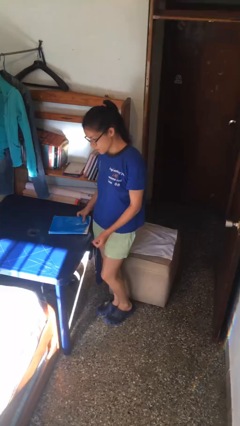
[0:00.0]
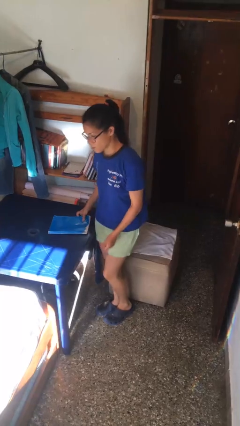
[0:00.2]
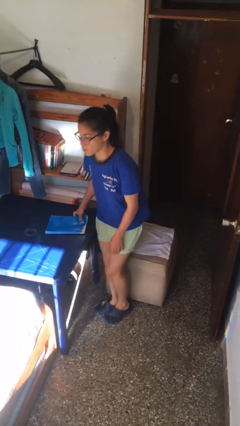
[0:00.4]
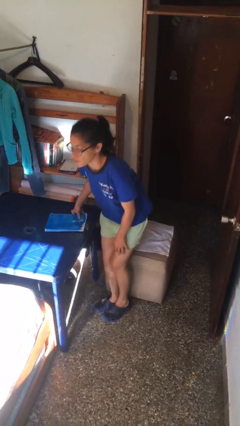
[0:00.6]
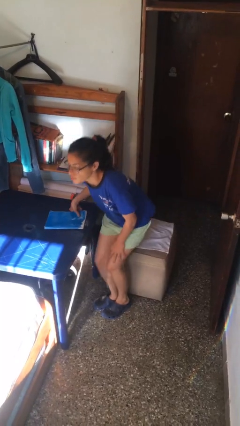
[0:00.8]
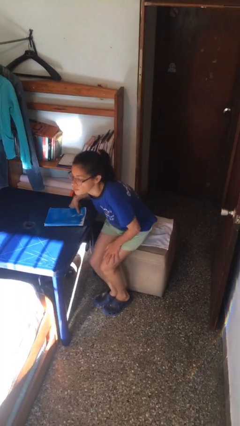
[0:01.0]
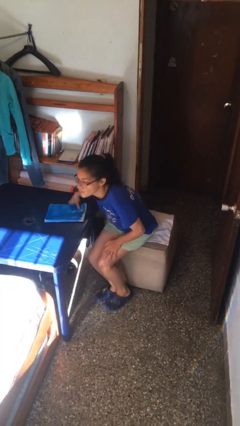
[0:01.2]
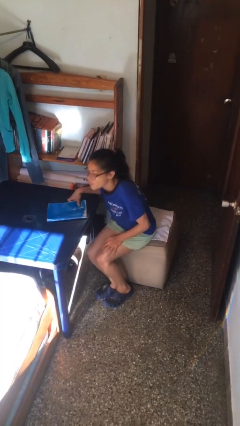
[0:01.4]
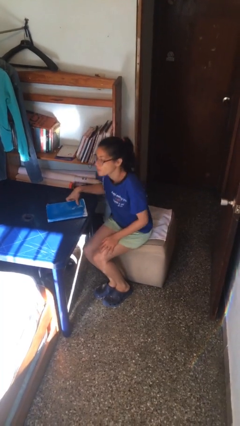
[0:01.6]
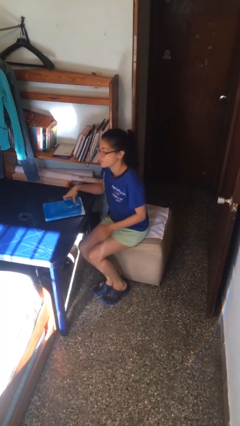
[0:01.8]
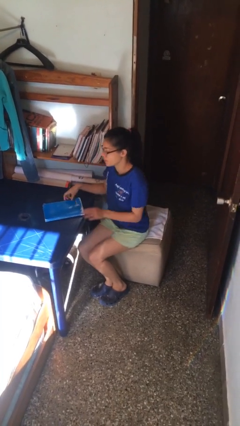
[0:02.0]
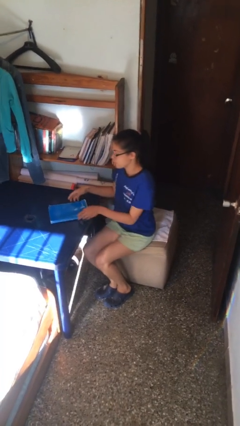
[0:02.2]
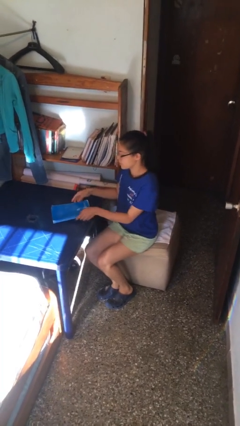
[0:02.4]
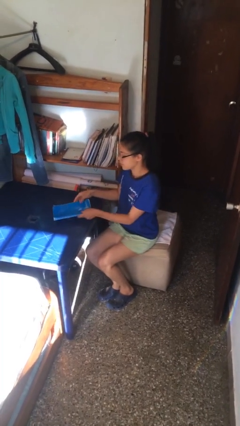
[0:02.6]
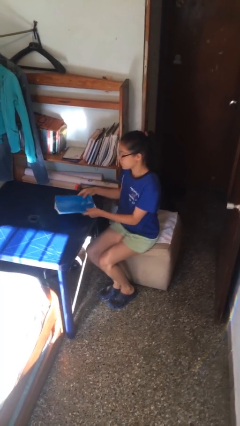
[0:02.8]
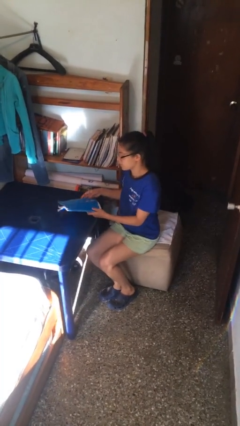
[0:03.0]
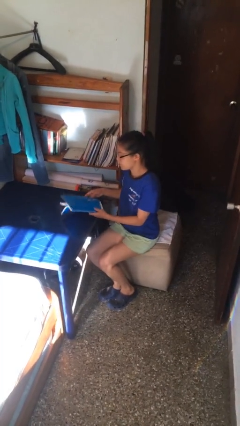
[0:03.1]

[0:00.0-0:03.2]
person sits down

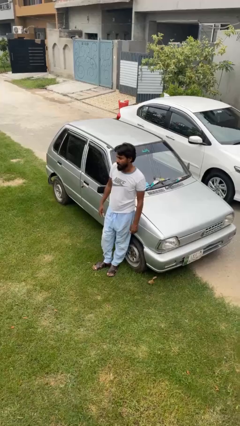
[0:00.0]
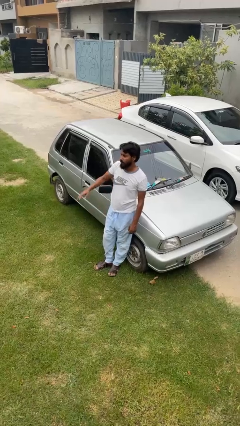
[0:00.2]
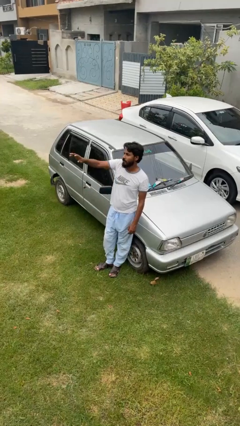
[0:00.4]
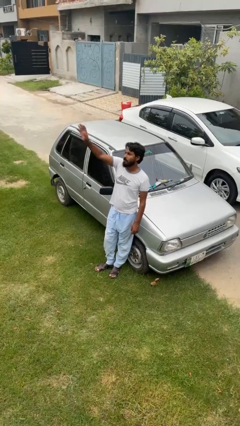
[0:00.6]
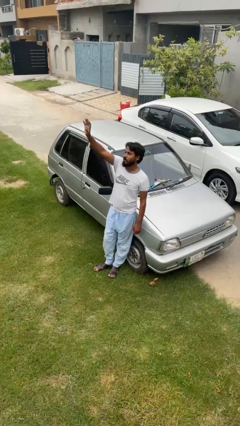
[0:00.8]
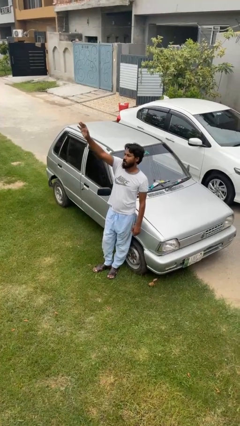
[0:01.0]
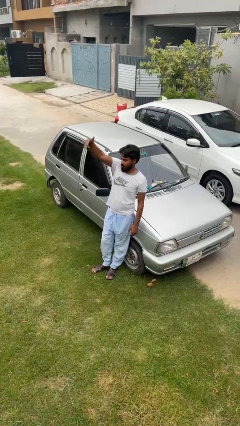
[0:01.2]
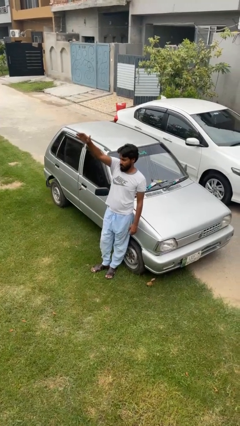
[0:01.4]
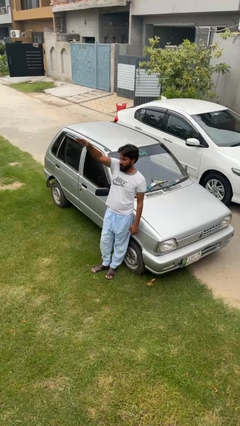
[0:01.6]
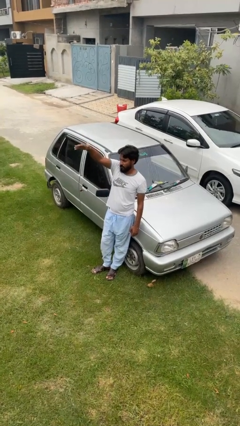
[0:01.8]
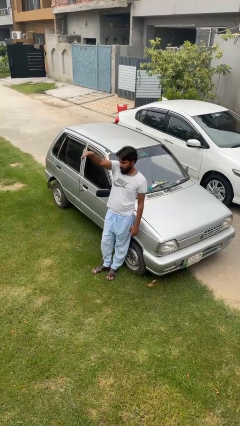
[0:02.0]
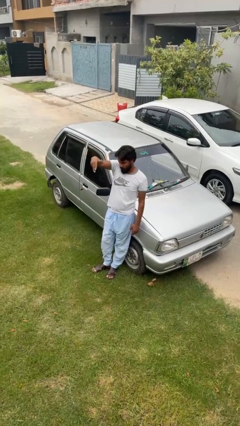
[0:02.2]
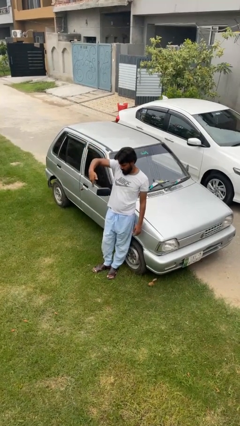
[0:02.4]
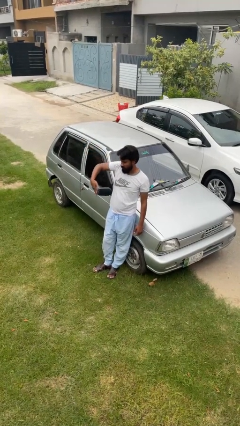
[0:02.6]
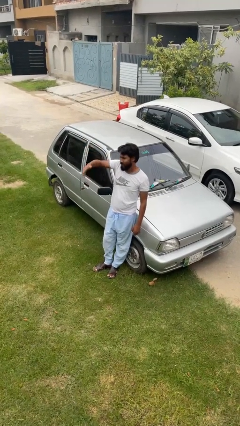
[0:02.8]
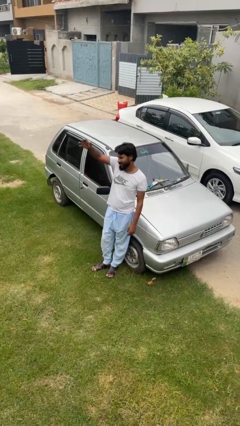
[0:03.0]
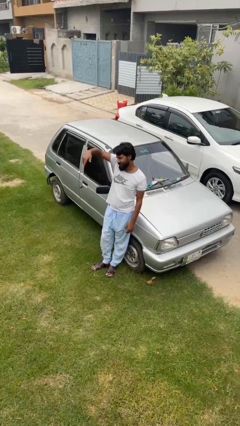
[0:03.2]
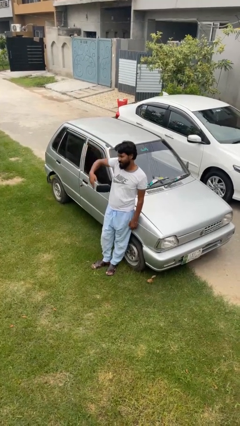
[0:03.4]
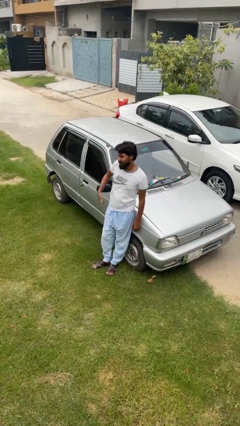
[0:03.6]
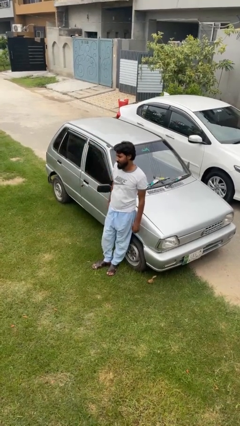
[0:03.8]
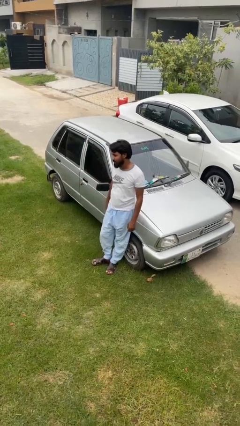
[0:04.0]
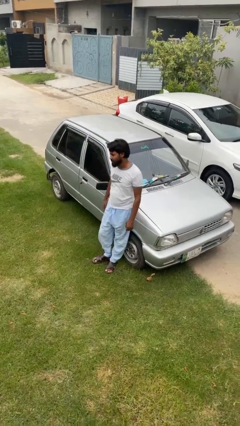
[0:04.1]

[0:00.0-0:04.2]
person gestures come here

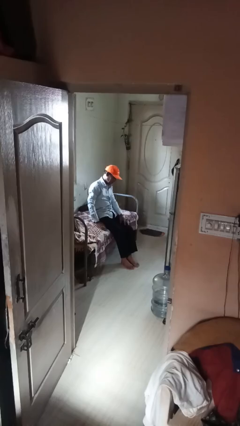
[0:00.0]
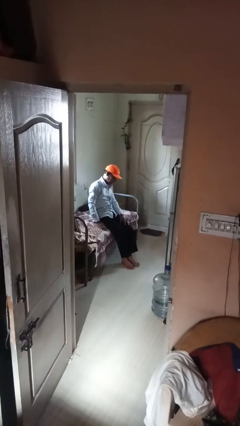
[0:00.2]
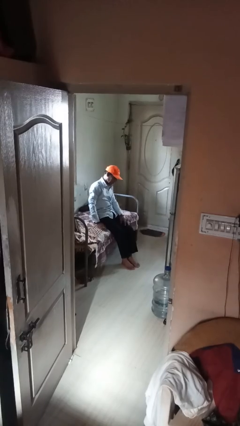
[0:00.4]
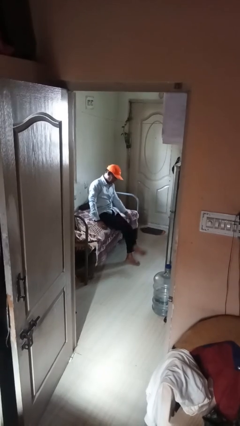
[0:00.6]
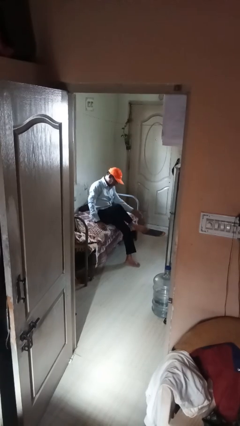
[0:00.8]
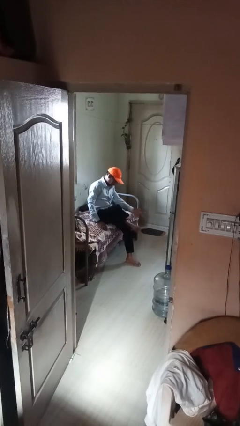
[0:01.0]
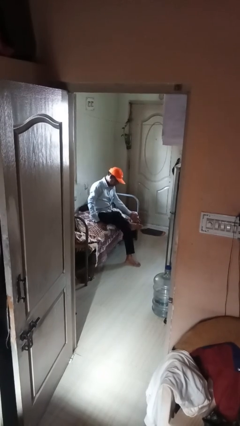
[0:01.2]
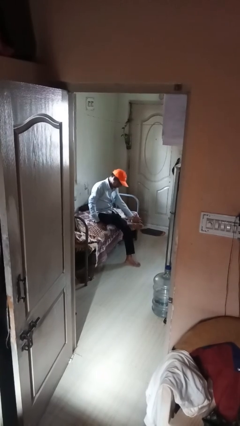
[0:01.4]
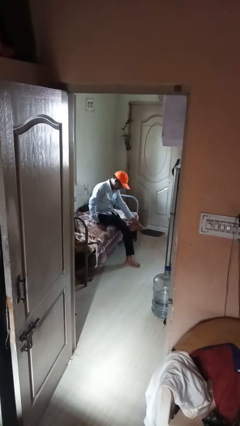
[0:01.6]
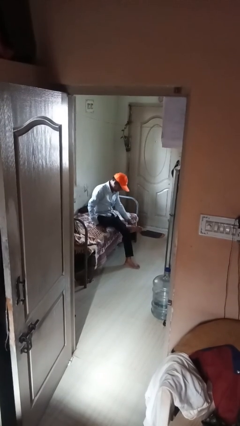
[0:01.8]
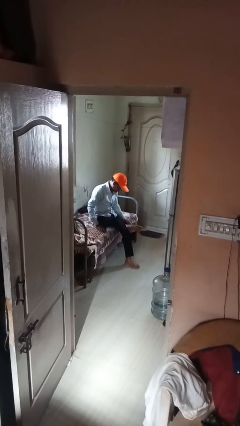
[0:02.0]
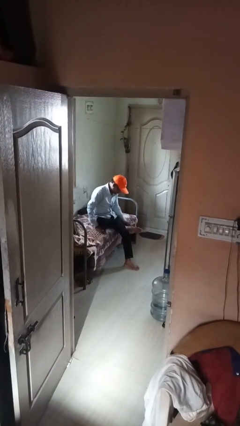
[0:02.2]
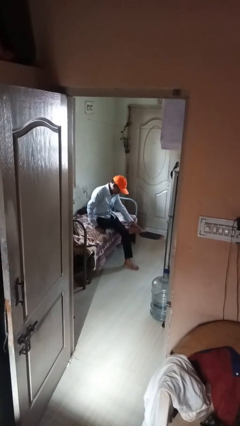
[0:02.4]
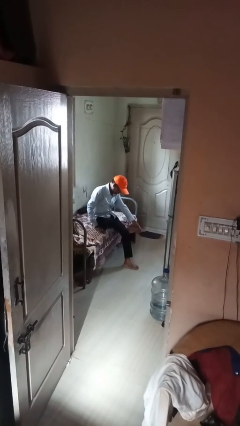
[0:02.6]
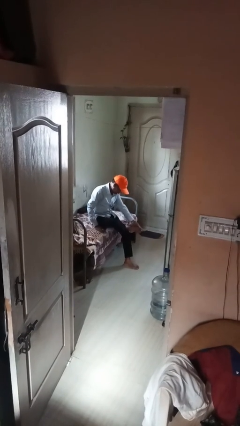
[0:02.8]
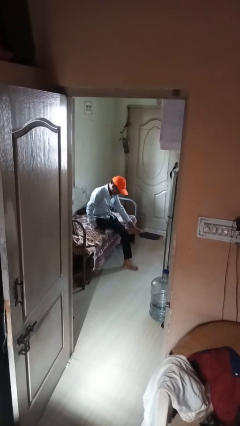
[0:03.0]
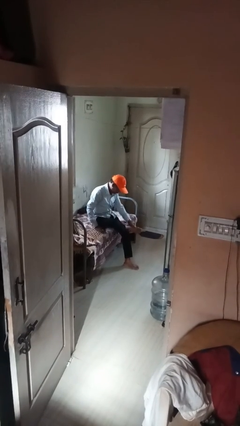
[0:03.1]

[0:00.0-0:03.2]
person rubs foot

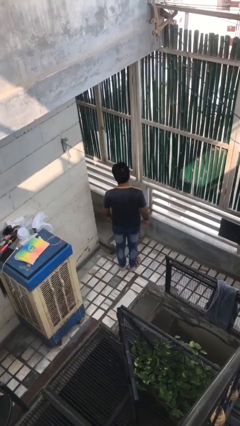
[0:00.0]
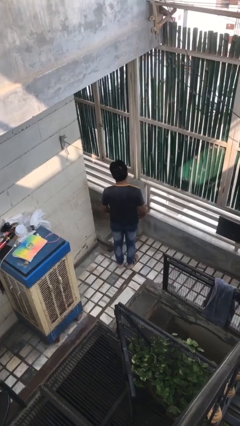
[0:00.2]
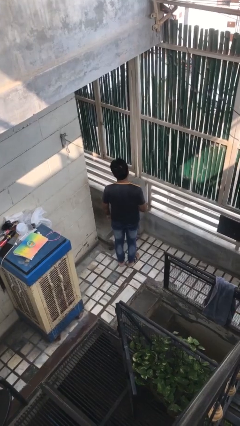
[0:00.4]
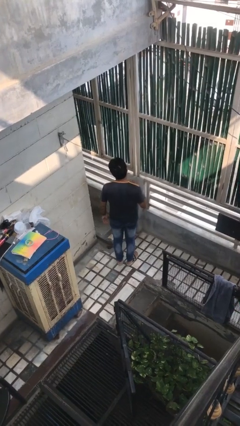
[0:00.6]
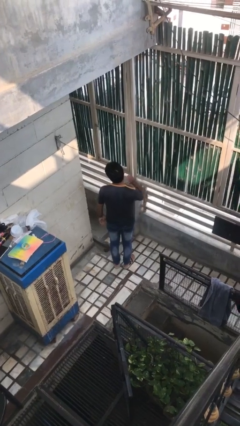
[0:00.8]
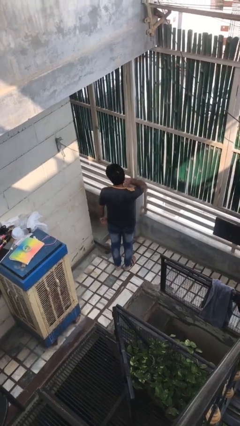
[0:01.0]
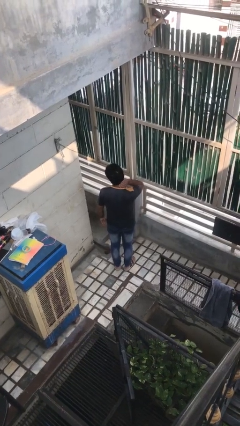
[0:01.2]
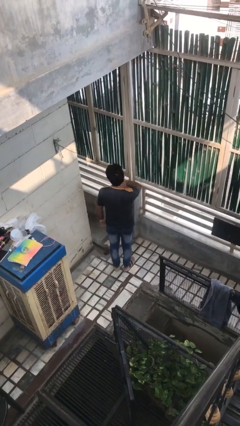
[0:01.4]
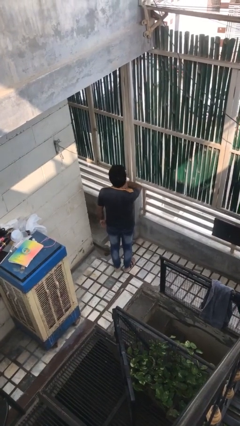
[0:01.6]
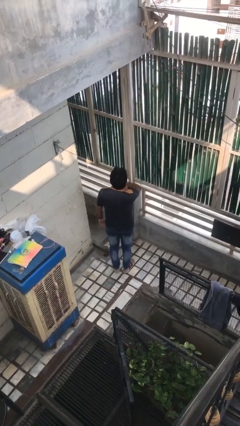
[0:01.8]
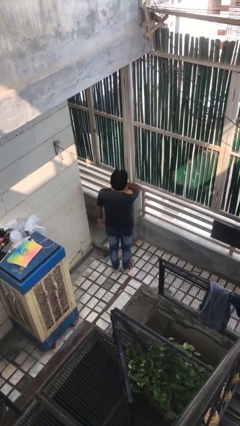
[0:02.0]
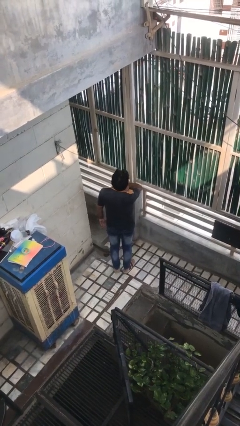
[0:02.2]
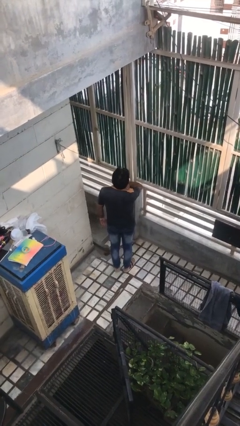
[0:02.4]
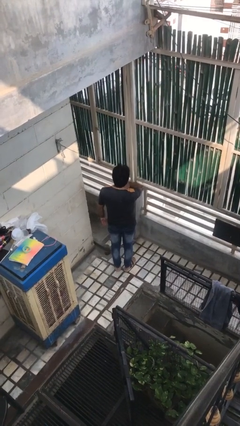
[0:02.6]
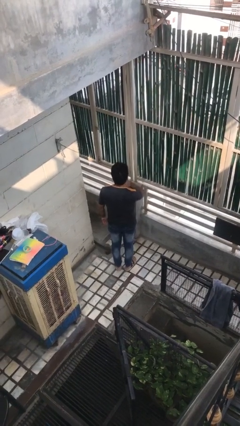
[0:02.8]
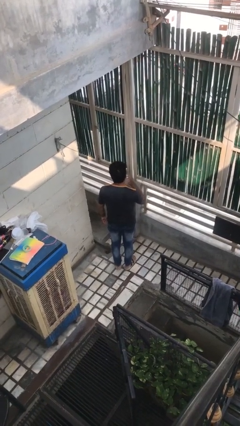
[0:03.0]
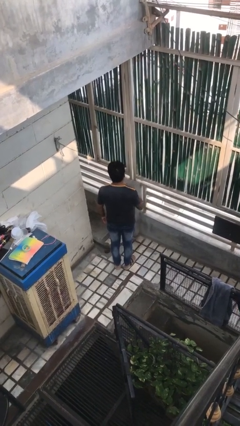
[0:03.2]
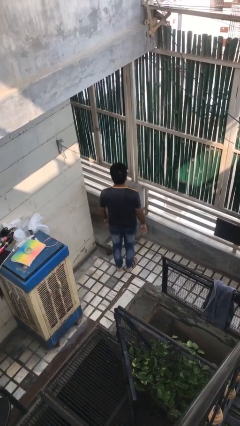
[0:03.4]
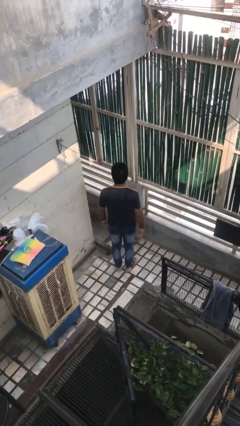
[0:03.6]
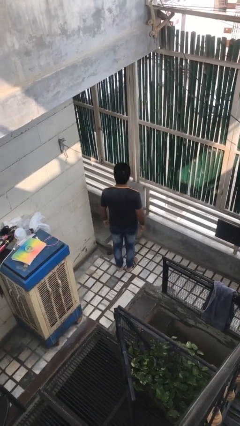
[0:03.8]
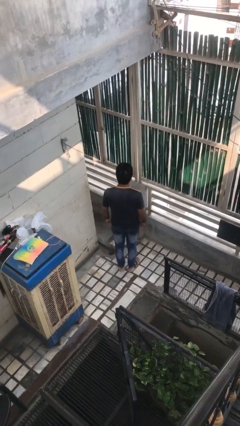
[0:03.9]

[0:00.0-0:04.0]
person rubs neck

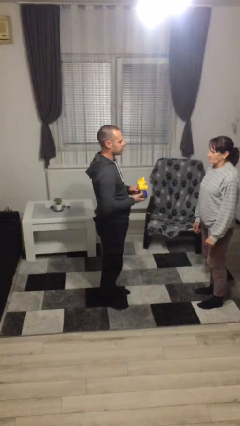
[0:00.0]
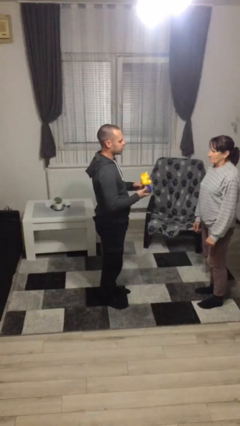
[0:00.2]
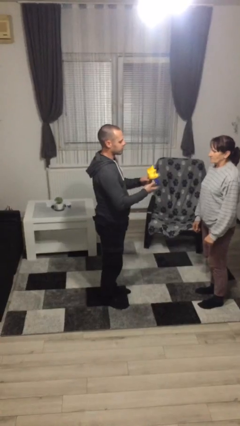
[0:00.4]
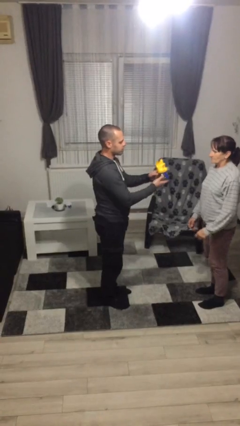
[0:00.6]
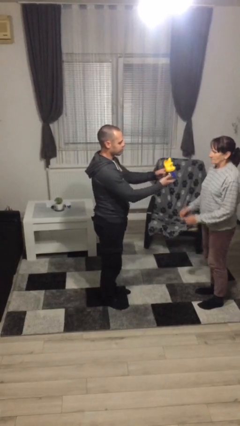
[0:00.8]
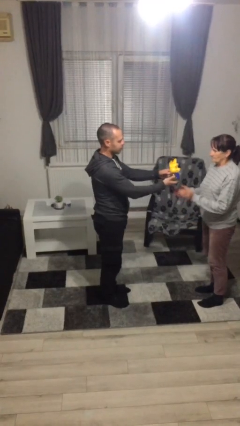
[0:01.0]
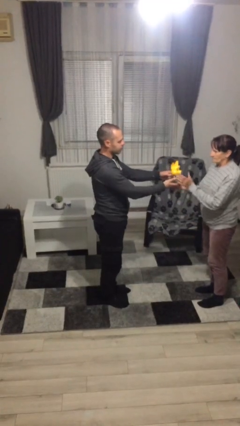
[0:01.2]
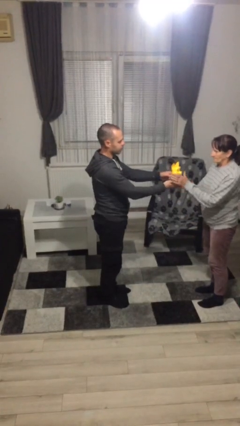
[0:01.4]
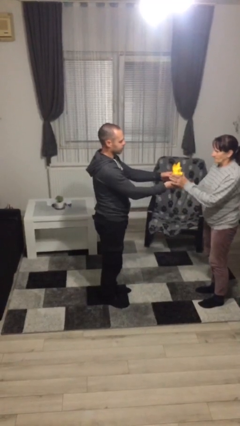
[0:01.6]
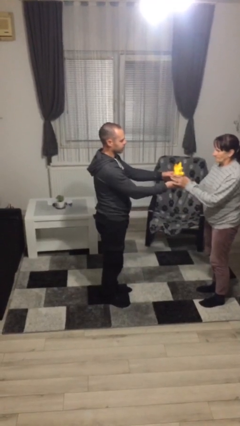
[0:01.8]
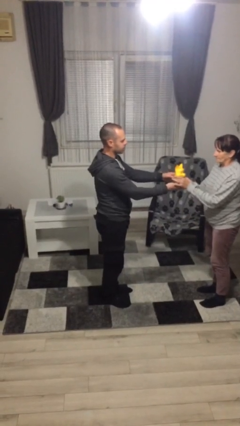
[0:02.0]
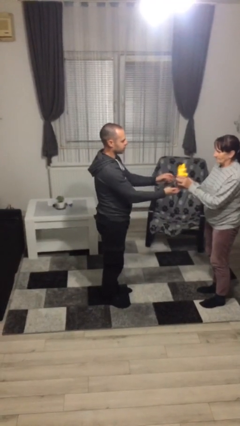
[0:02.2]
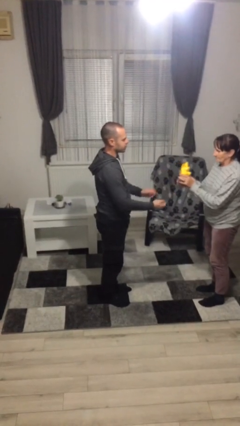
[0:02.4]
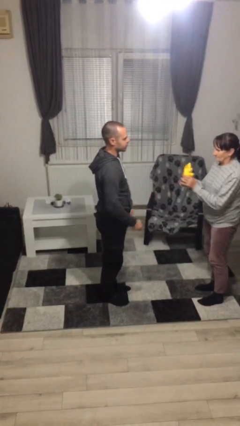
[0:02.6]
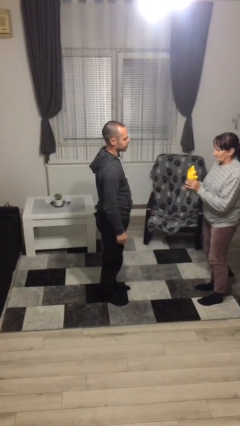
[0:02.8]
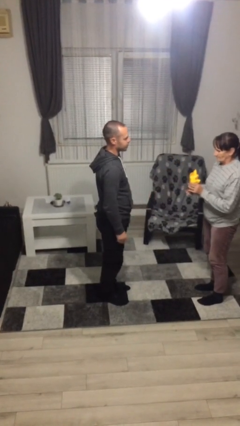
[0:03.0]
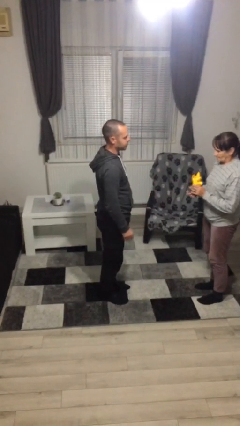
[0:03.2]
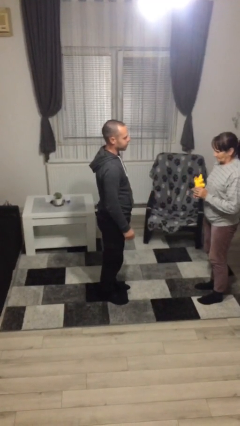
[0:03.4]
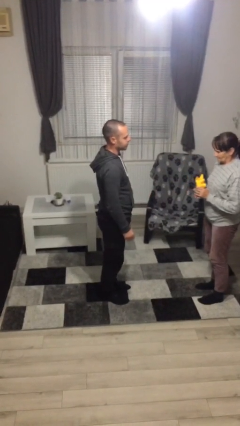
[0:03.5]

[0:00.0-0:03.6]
person transfers object to person
